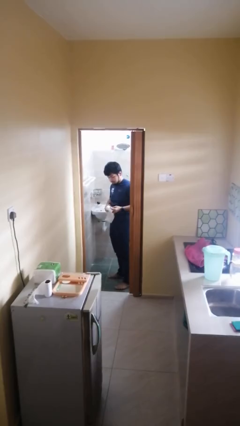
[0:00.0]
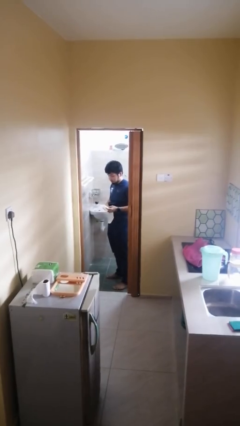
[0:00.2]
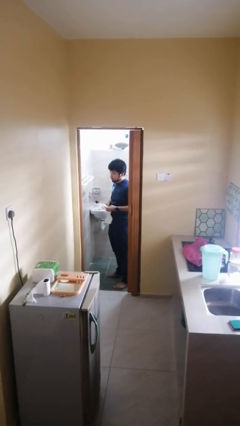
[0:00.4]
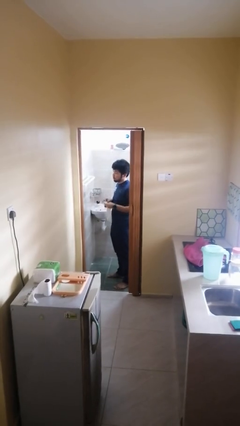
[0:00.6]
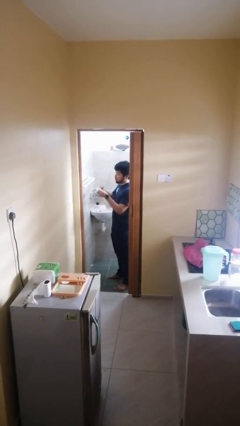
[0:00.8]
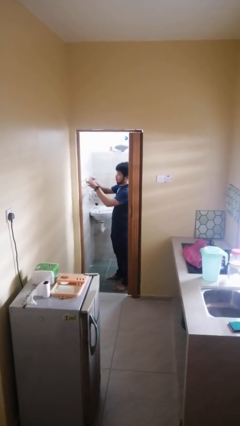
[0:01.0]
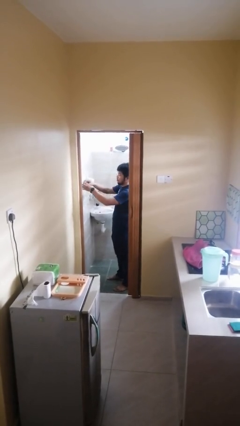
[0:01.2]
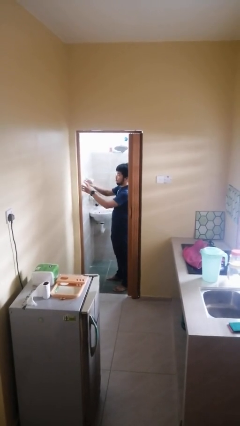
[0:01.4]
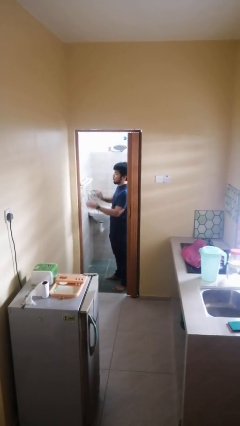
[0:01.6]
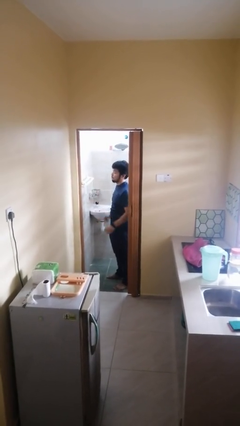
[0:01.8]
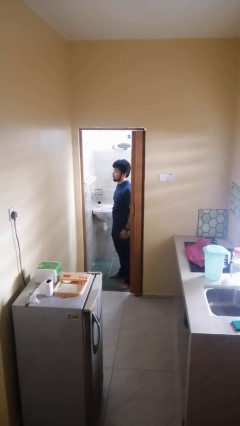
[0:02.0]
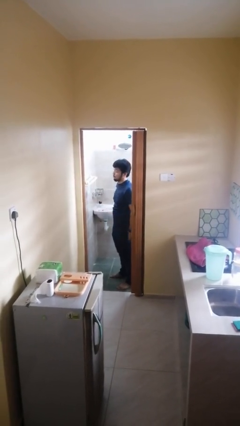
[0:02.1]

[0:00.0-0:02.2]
person puts down object on countertop

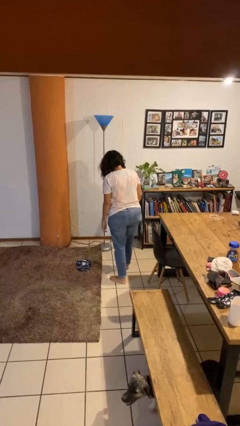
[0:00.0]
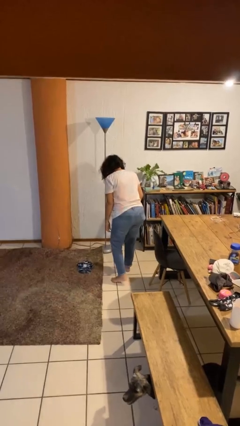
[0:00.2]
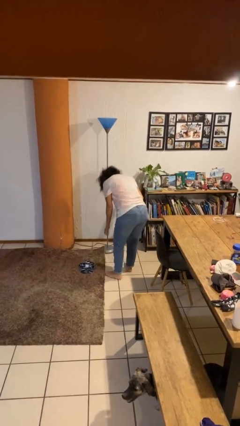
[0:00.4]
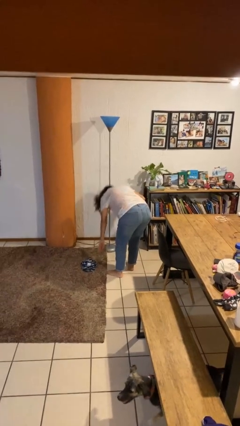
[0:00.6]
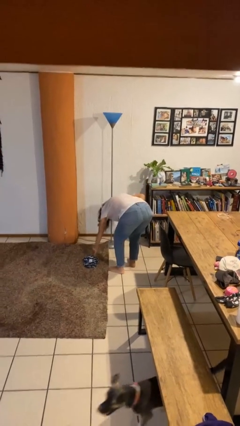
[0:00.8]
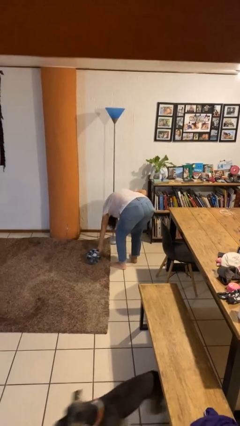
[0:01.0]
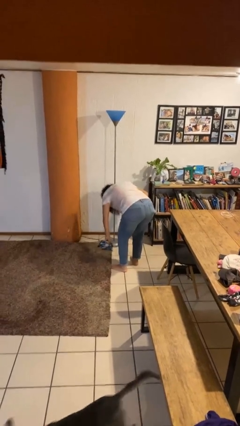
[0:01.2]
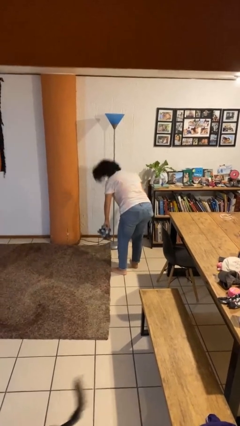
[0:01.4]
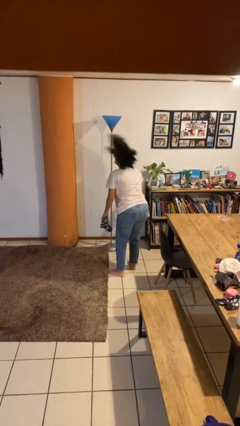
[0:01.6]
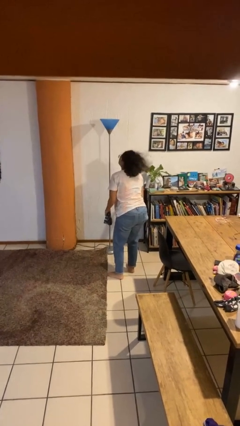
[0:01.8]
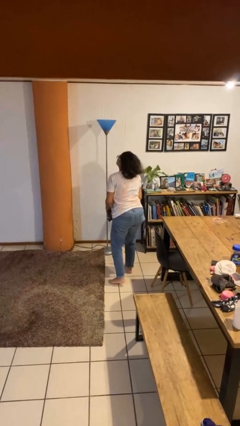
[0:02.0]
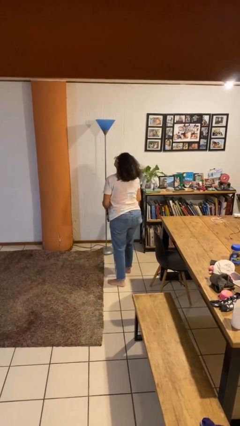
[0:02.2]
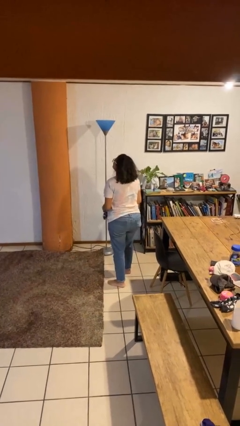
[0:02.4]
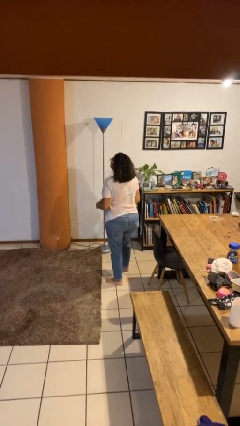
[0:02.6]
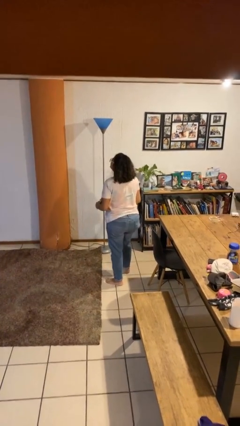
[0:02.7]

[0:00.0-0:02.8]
person picks up object from floor

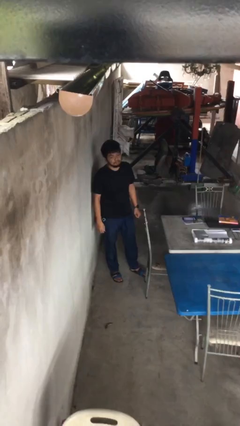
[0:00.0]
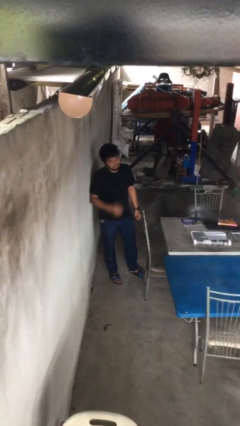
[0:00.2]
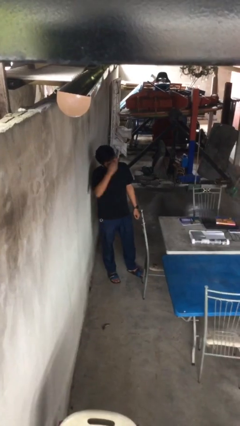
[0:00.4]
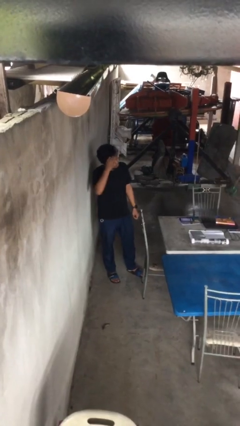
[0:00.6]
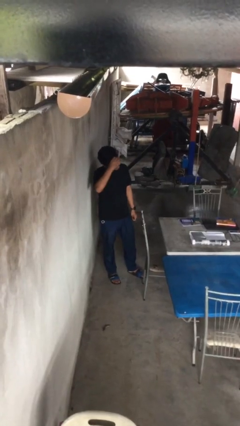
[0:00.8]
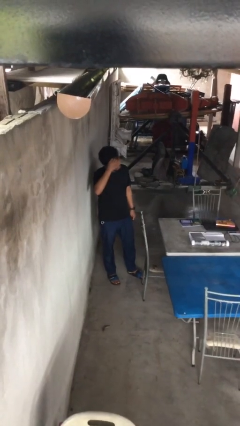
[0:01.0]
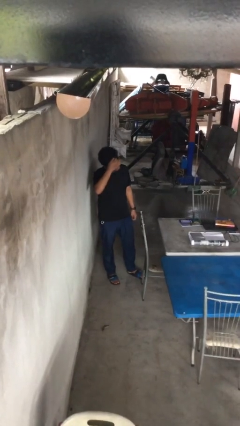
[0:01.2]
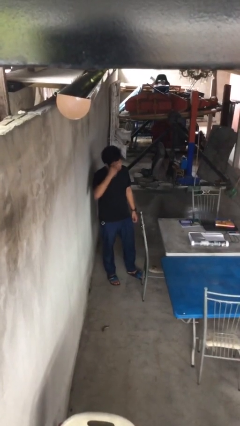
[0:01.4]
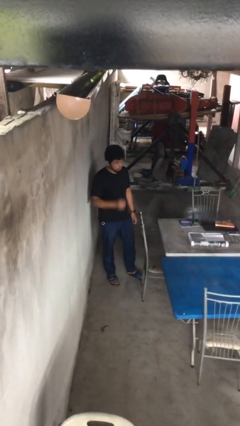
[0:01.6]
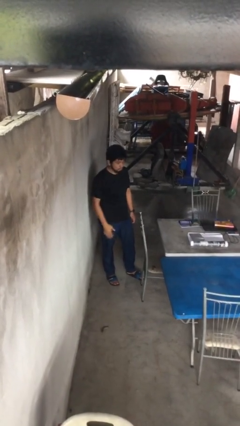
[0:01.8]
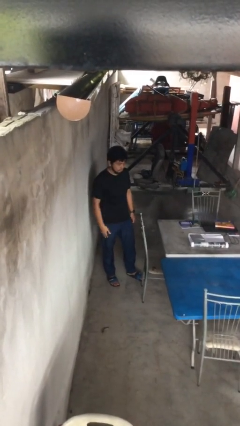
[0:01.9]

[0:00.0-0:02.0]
person scratches face

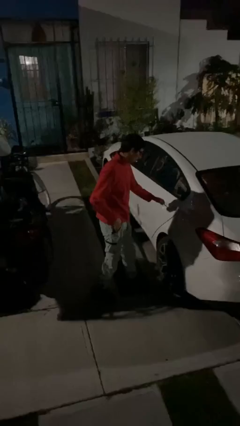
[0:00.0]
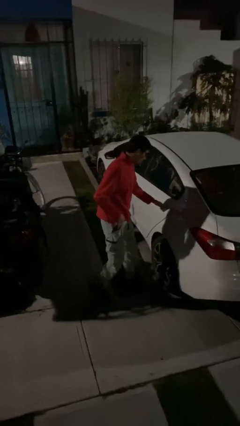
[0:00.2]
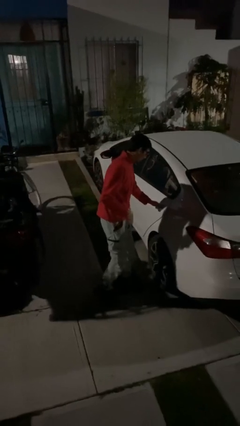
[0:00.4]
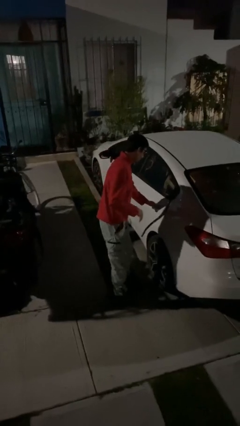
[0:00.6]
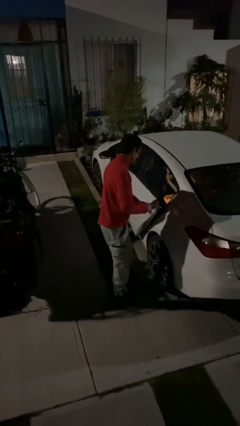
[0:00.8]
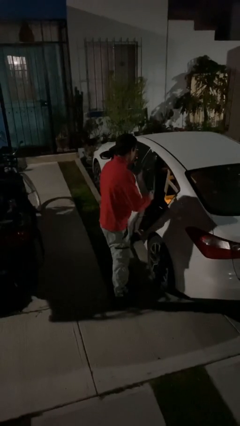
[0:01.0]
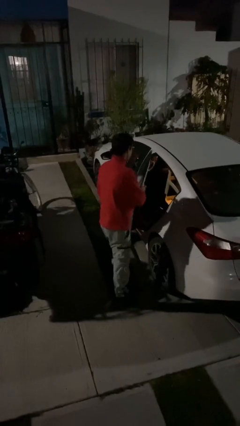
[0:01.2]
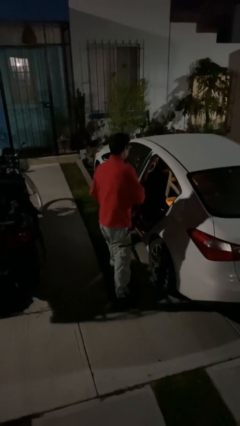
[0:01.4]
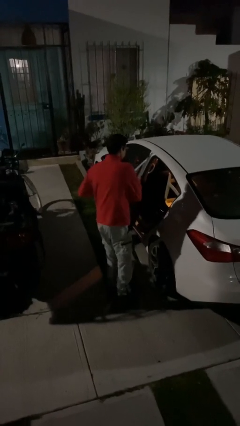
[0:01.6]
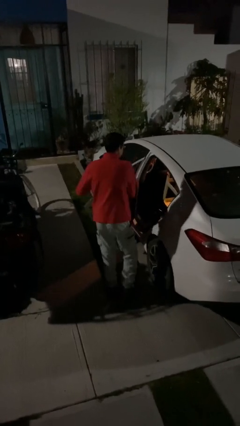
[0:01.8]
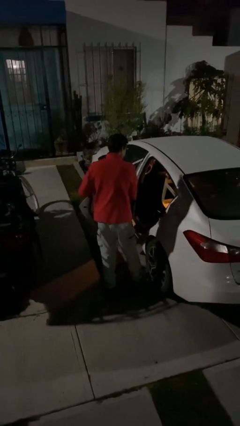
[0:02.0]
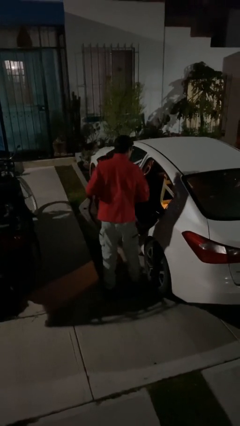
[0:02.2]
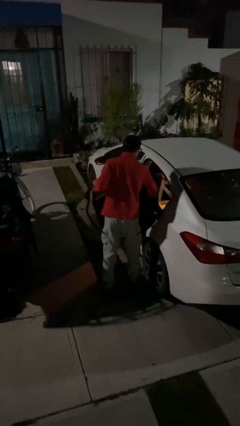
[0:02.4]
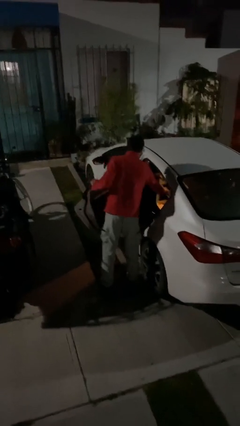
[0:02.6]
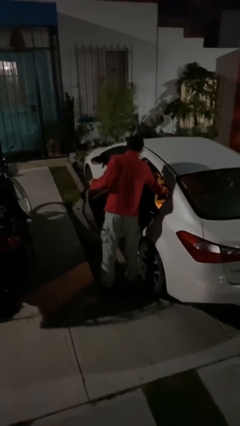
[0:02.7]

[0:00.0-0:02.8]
person opens car door

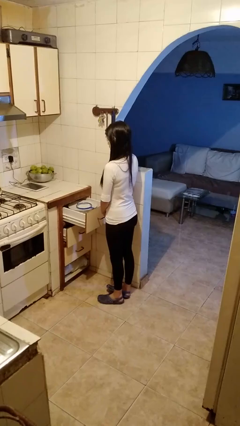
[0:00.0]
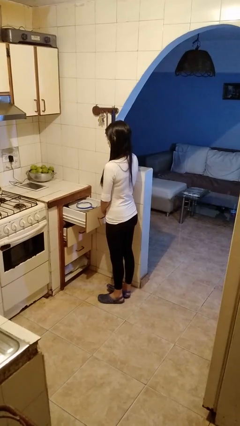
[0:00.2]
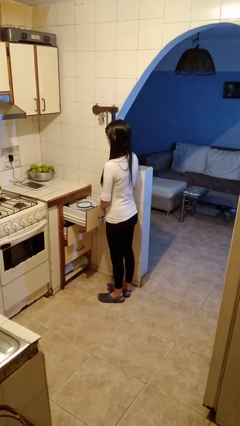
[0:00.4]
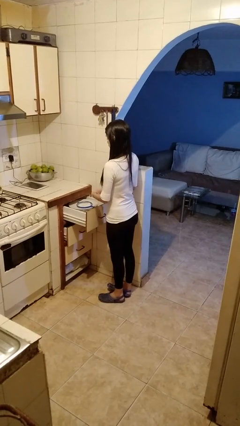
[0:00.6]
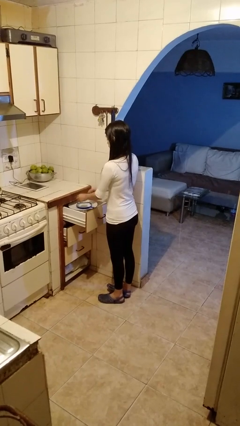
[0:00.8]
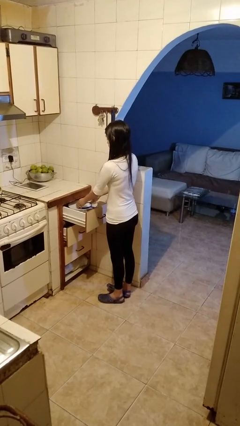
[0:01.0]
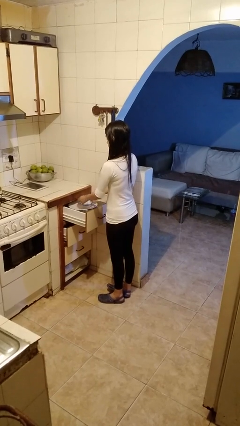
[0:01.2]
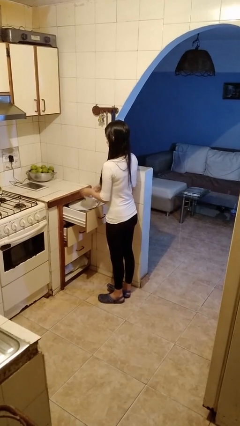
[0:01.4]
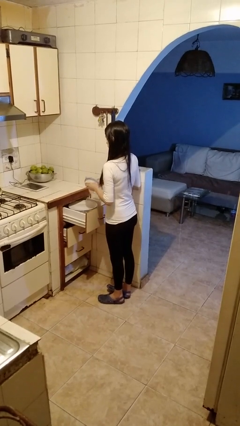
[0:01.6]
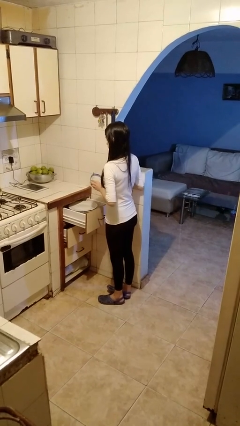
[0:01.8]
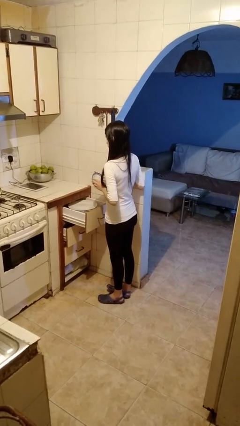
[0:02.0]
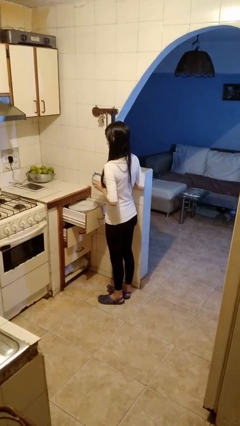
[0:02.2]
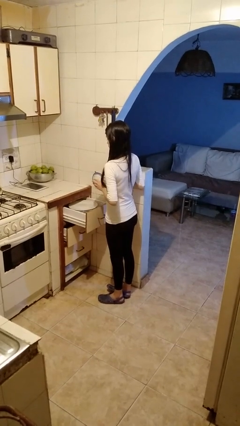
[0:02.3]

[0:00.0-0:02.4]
person picks up object from cabinet

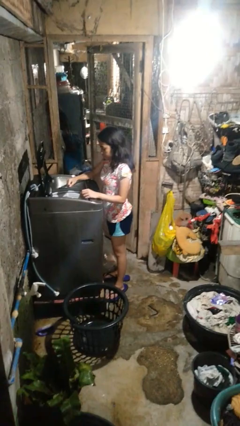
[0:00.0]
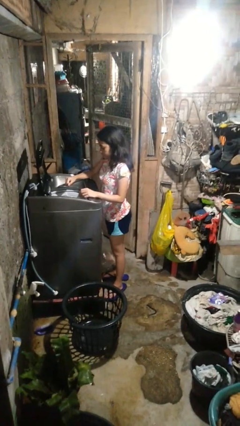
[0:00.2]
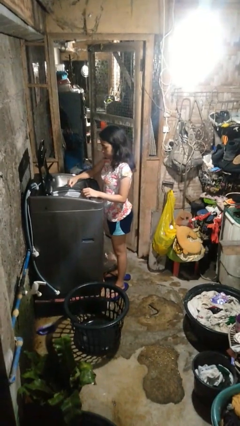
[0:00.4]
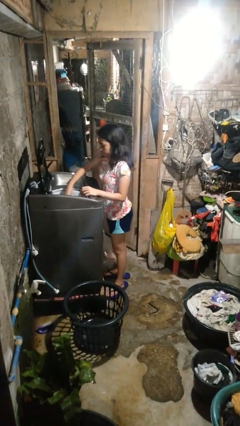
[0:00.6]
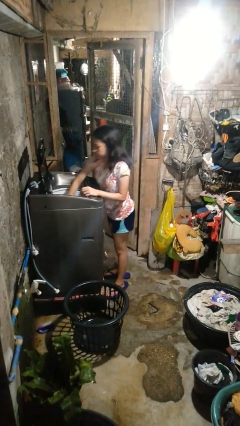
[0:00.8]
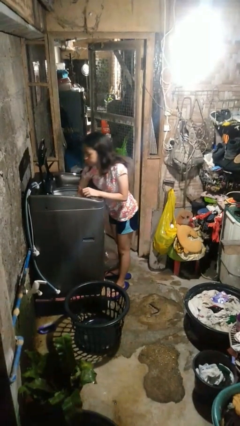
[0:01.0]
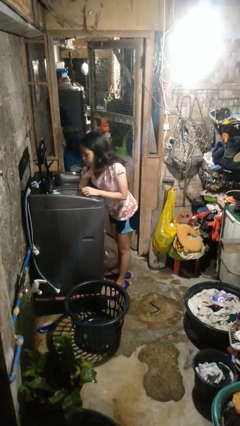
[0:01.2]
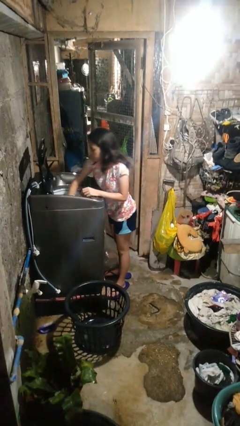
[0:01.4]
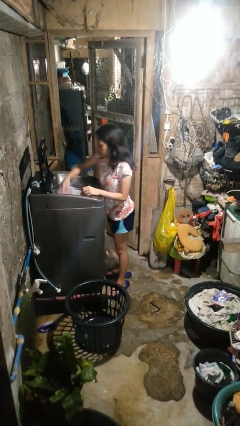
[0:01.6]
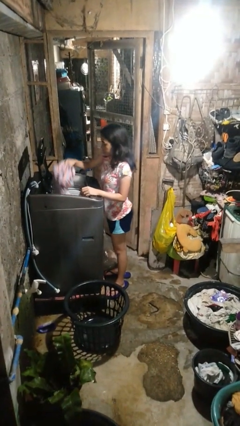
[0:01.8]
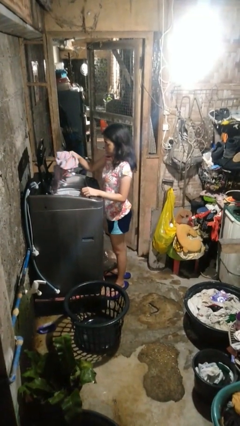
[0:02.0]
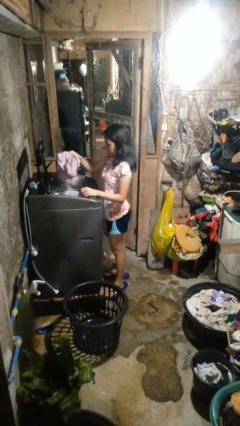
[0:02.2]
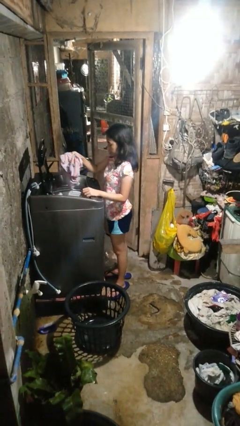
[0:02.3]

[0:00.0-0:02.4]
person unloads clotheswasher

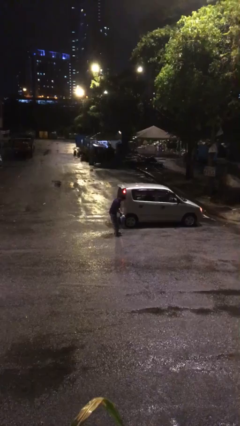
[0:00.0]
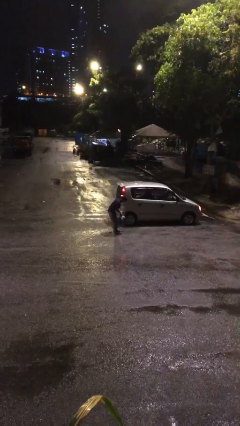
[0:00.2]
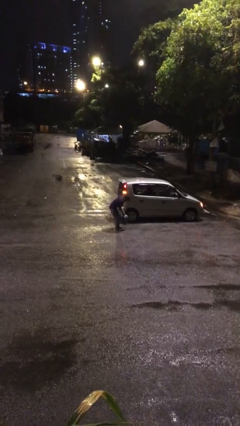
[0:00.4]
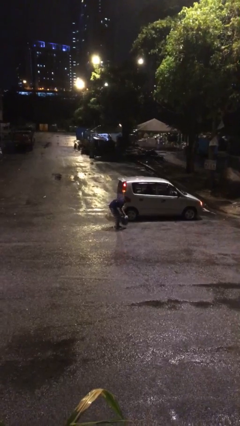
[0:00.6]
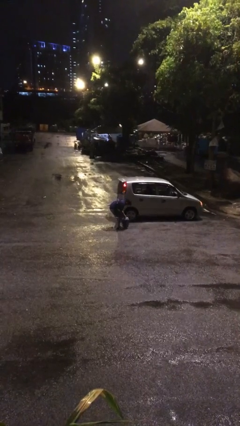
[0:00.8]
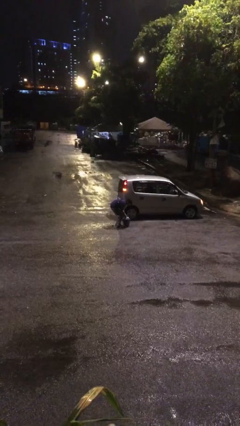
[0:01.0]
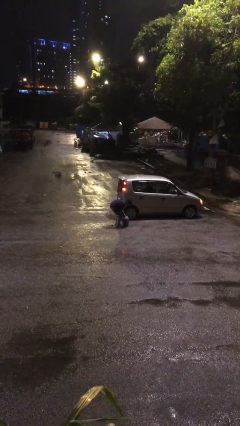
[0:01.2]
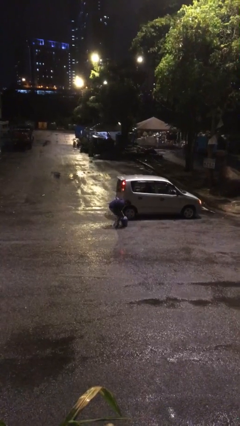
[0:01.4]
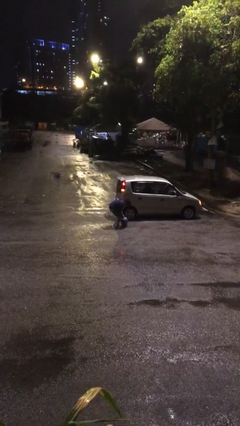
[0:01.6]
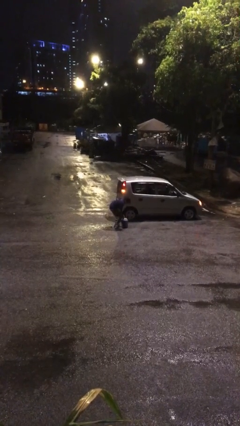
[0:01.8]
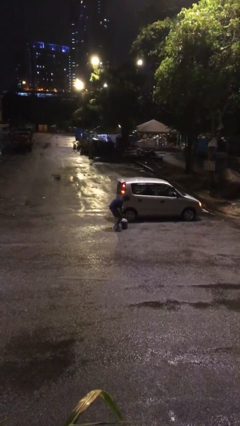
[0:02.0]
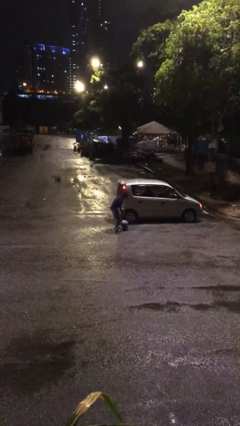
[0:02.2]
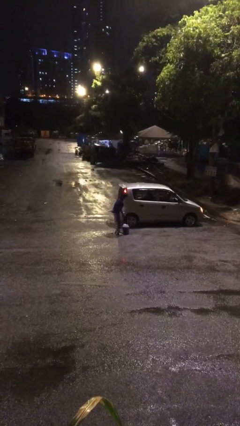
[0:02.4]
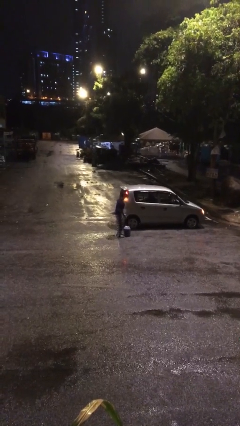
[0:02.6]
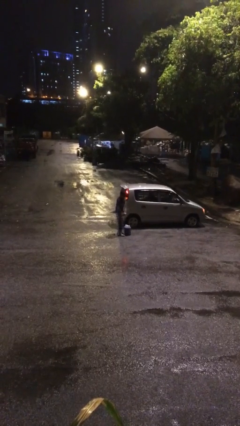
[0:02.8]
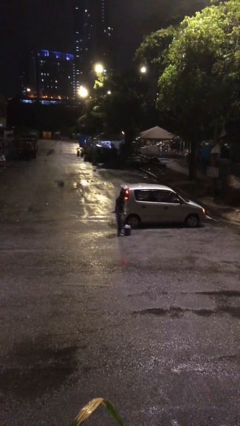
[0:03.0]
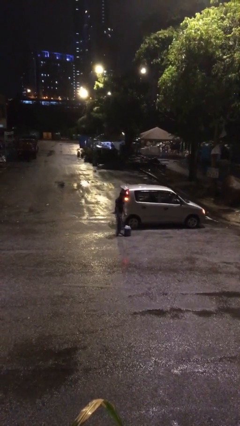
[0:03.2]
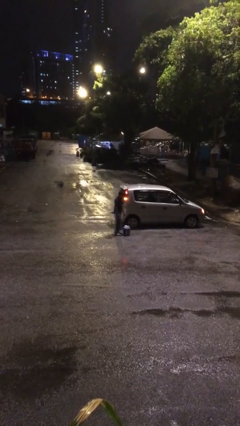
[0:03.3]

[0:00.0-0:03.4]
person puts down object on floor
